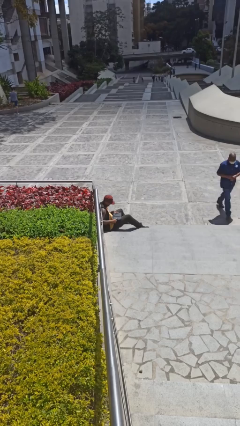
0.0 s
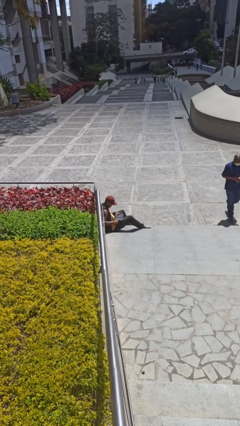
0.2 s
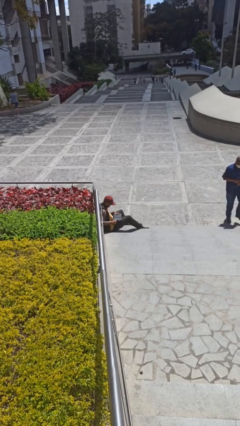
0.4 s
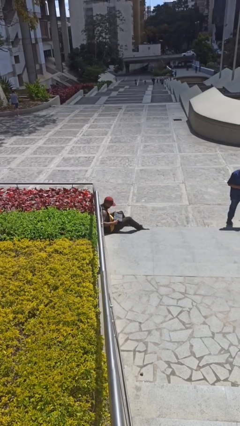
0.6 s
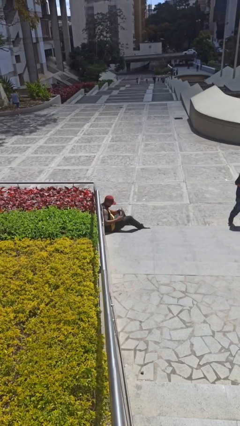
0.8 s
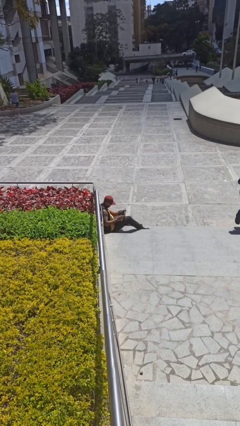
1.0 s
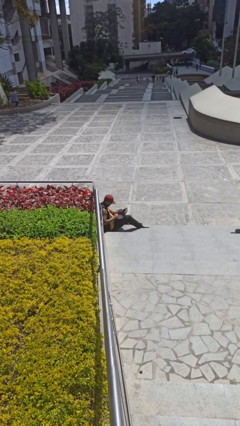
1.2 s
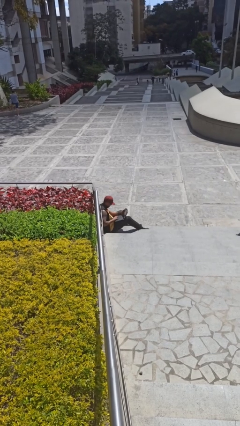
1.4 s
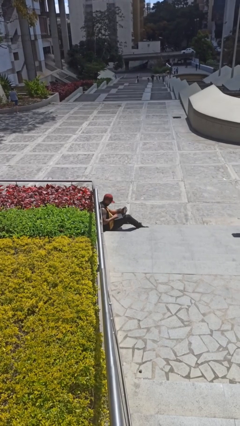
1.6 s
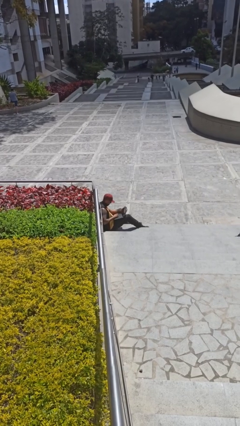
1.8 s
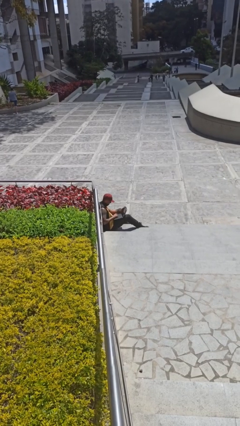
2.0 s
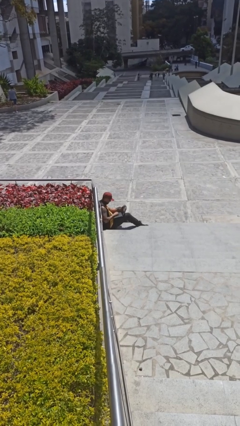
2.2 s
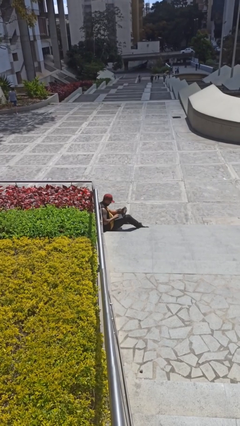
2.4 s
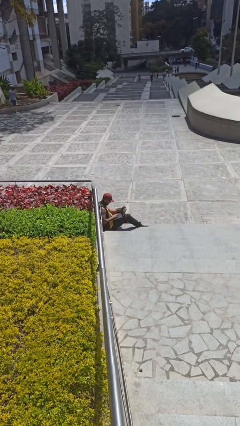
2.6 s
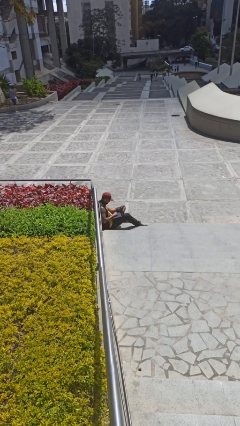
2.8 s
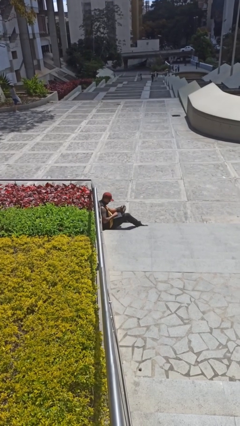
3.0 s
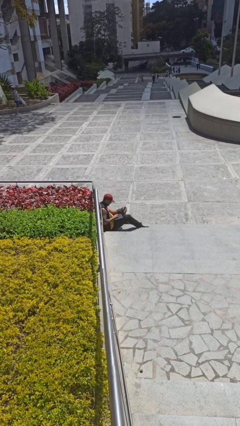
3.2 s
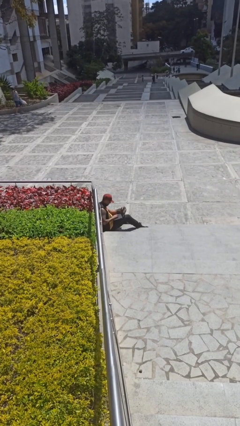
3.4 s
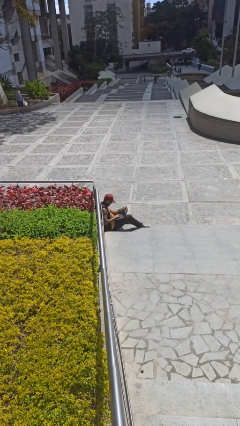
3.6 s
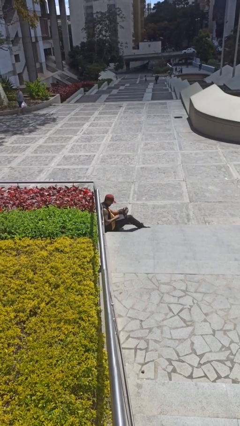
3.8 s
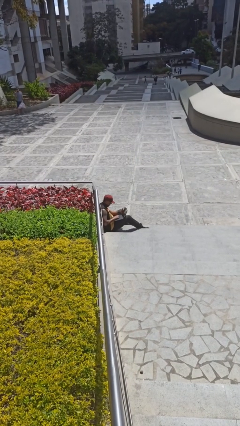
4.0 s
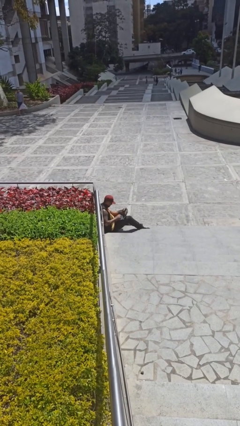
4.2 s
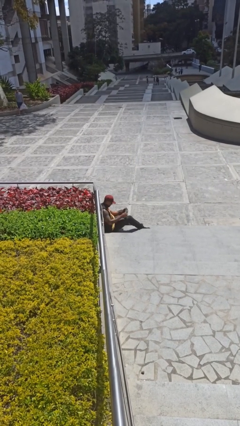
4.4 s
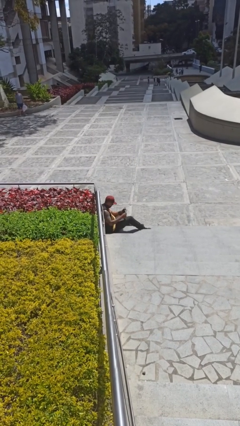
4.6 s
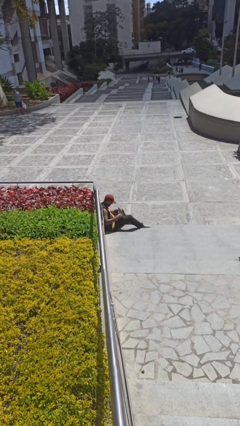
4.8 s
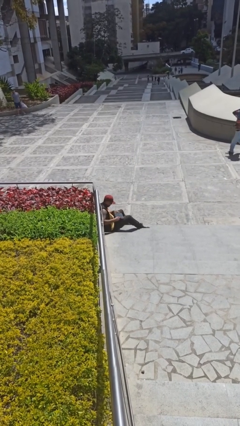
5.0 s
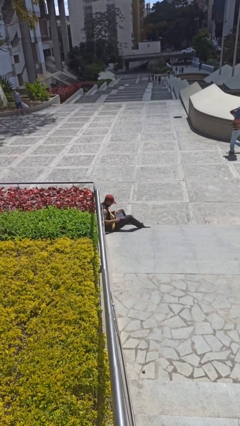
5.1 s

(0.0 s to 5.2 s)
person interacts with laptop

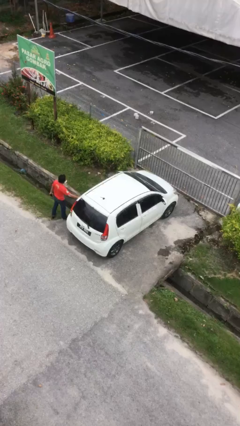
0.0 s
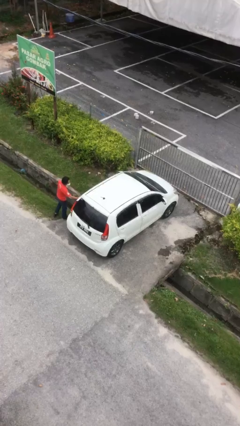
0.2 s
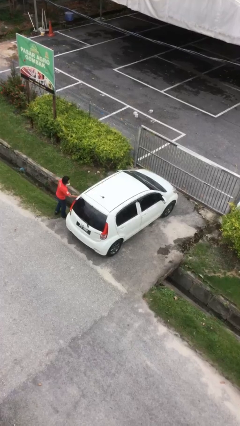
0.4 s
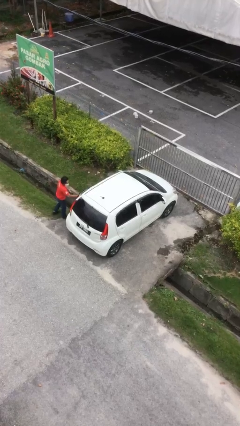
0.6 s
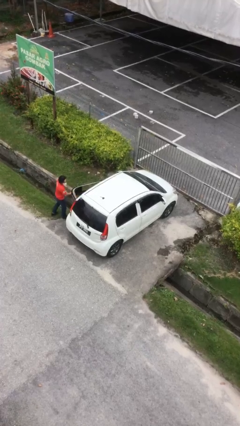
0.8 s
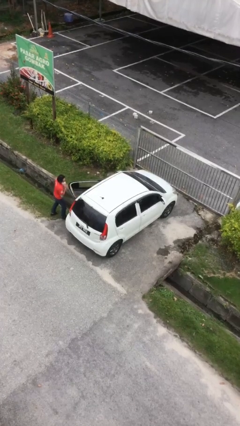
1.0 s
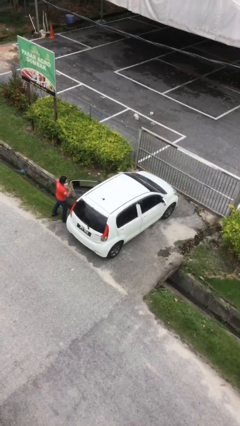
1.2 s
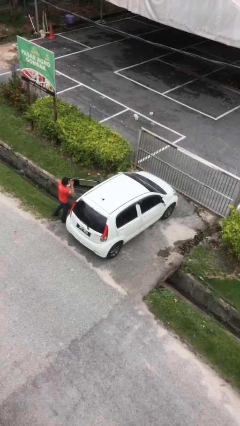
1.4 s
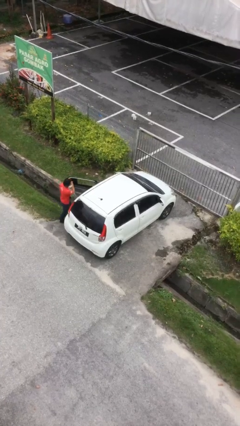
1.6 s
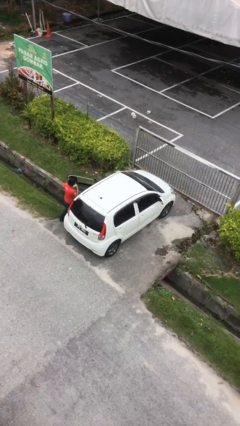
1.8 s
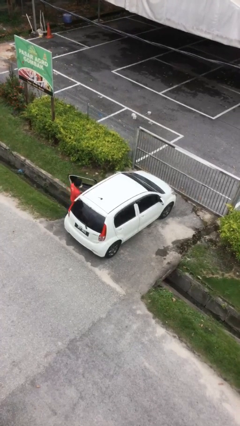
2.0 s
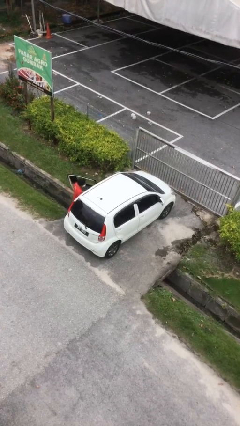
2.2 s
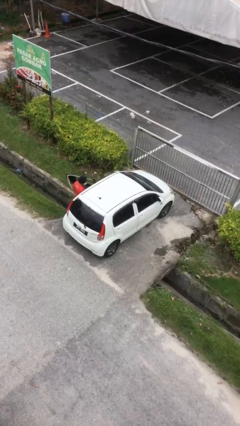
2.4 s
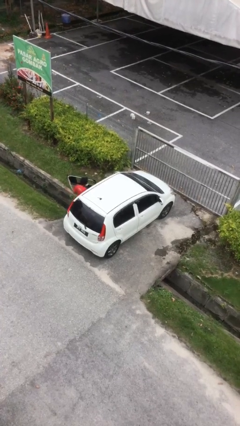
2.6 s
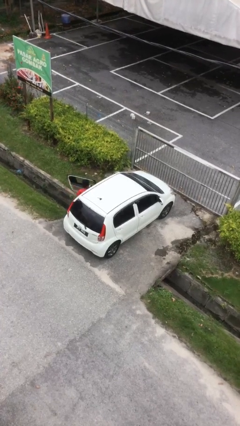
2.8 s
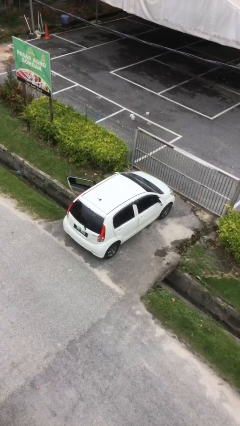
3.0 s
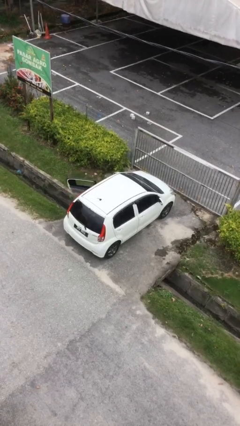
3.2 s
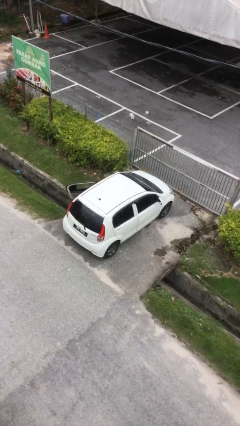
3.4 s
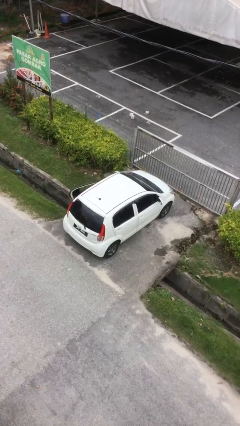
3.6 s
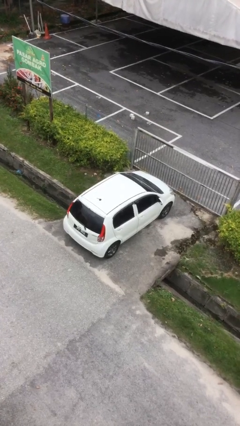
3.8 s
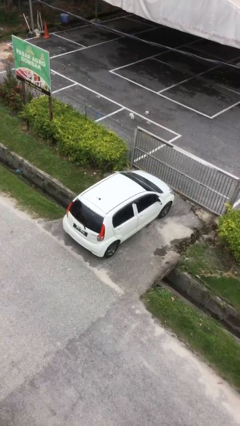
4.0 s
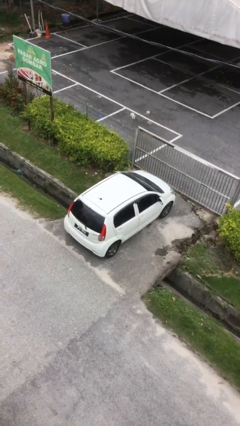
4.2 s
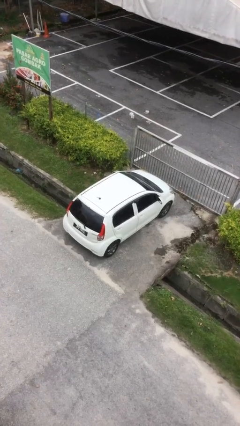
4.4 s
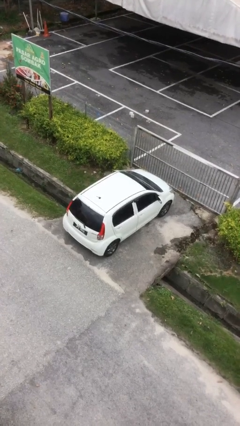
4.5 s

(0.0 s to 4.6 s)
car picks up person

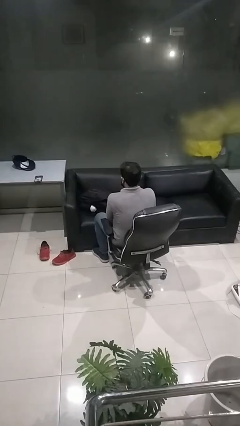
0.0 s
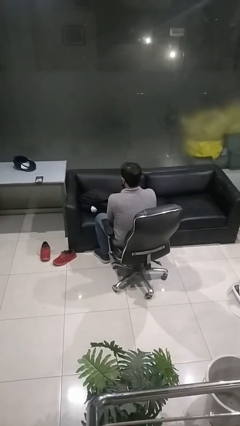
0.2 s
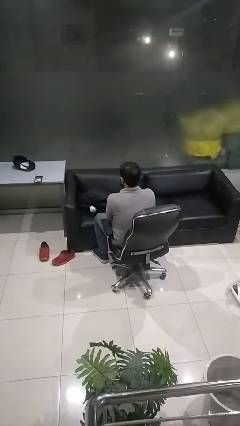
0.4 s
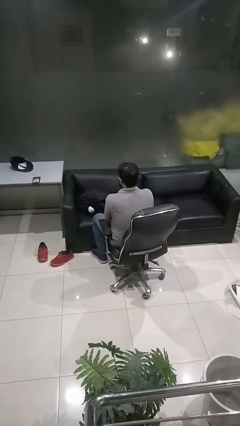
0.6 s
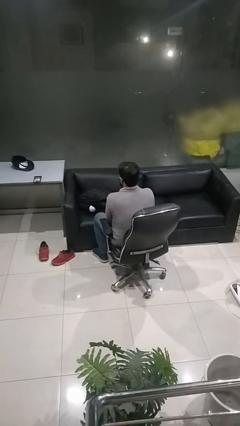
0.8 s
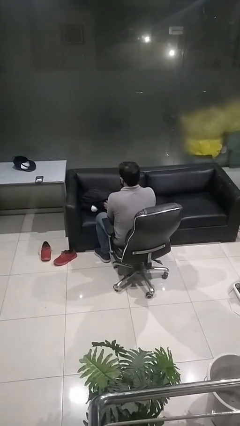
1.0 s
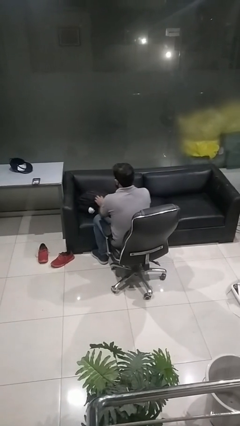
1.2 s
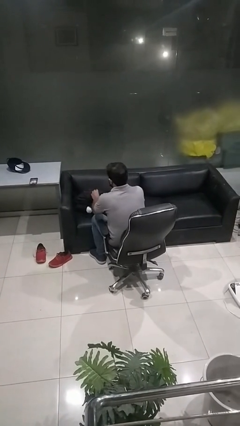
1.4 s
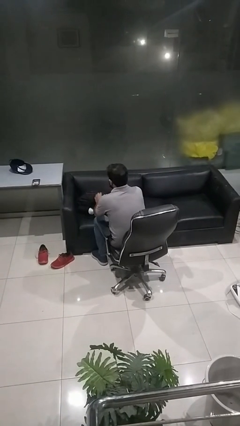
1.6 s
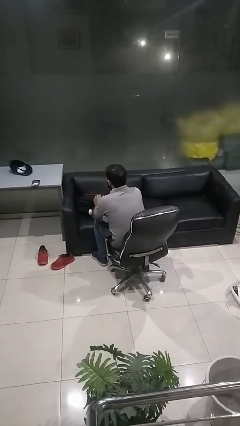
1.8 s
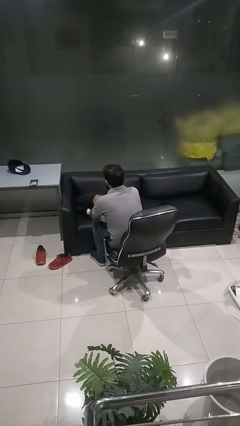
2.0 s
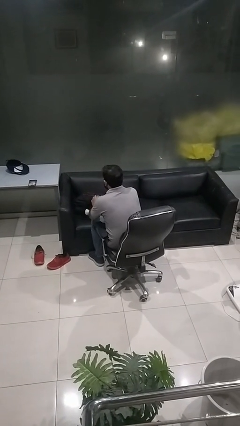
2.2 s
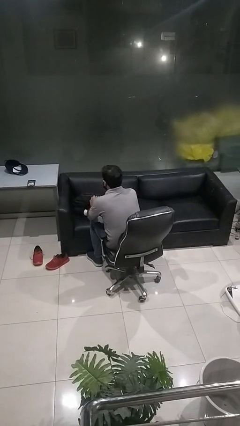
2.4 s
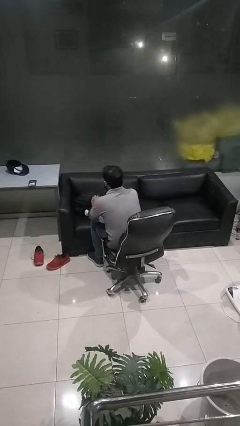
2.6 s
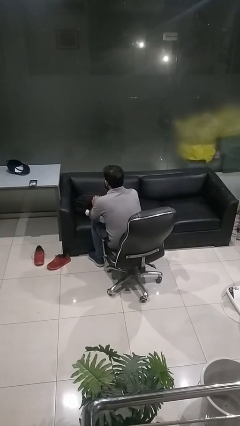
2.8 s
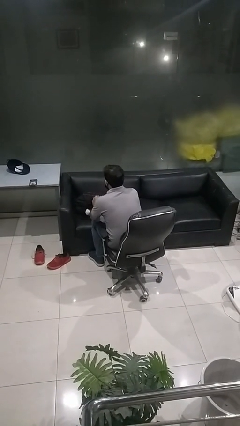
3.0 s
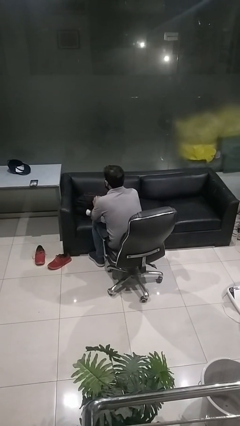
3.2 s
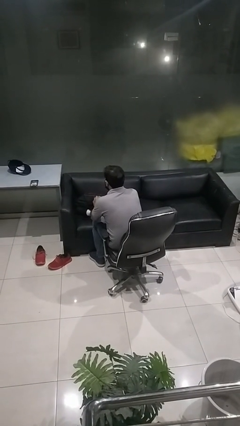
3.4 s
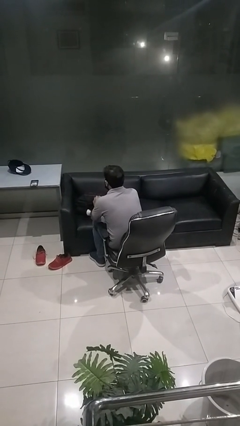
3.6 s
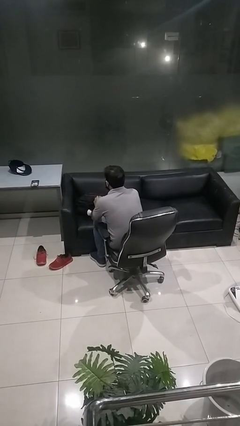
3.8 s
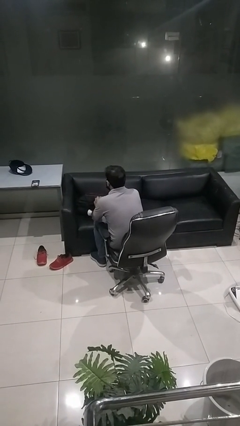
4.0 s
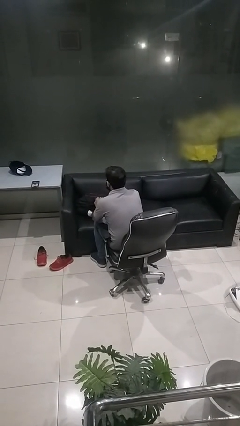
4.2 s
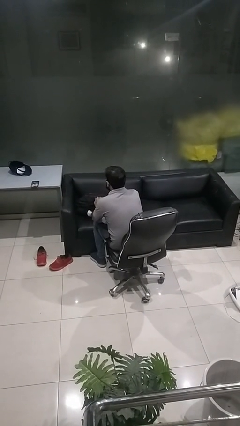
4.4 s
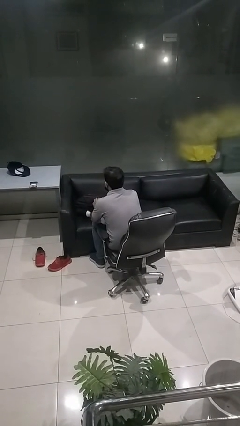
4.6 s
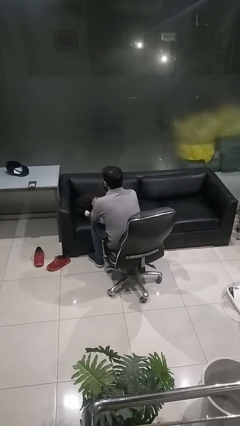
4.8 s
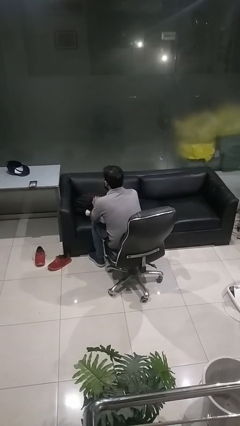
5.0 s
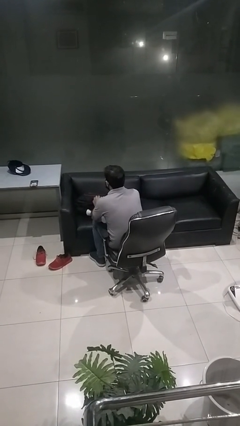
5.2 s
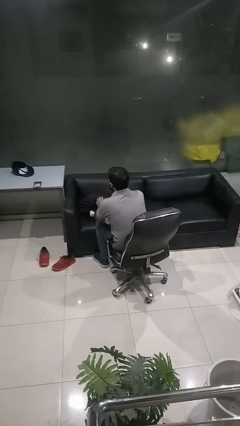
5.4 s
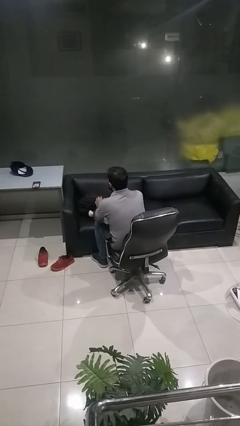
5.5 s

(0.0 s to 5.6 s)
person searches in backpack

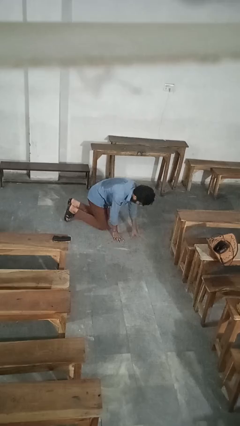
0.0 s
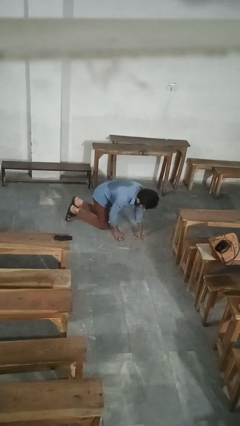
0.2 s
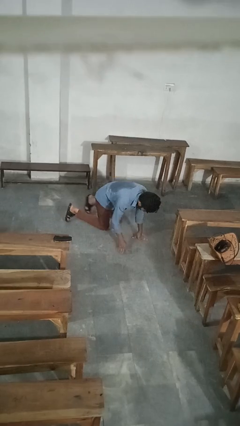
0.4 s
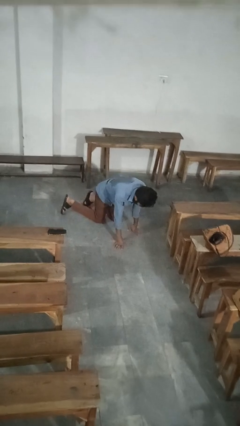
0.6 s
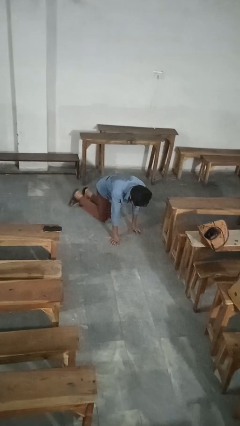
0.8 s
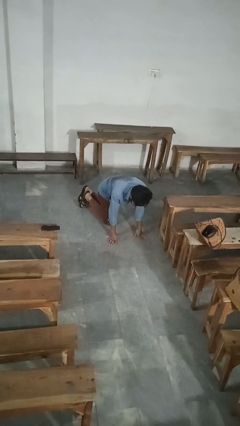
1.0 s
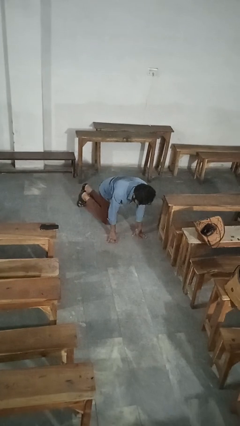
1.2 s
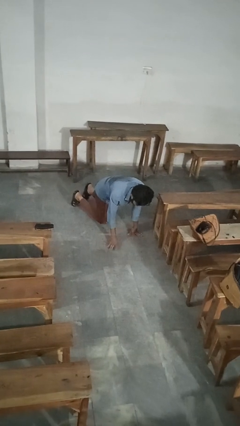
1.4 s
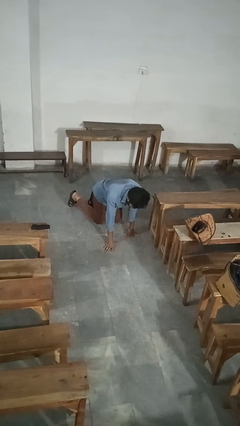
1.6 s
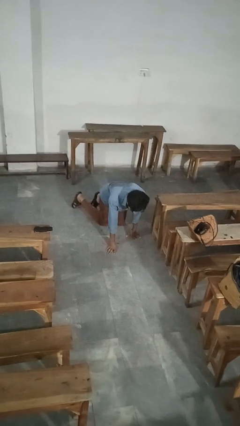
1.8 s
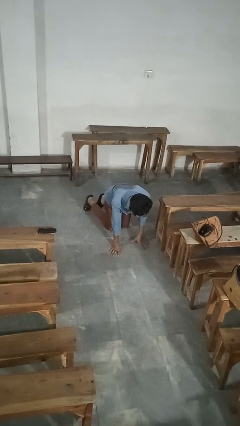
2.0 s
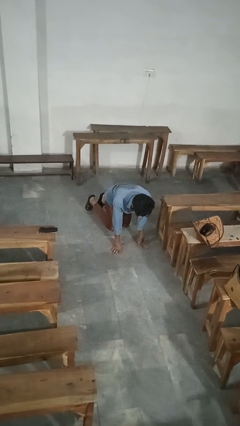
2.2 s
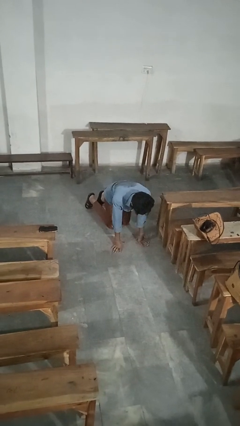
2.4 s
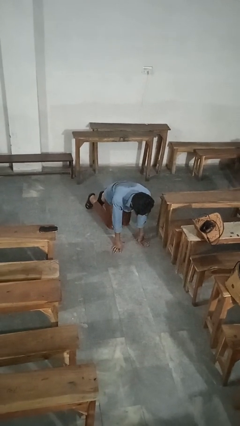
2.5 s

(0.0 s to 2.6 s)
person crawls
